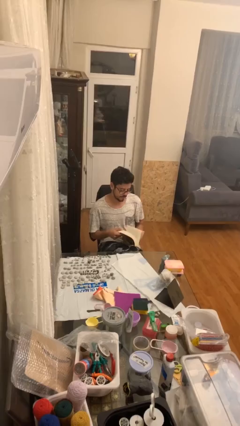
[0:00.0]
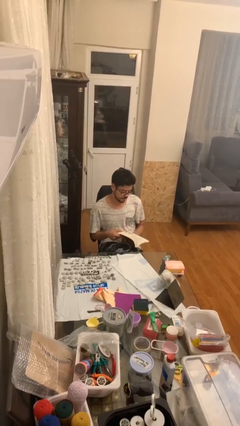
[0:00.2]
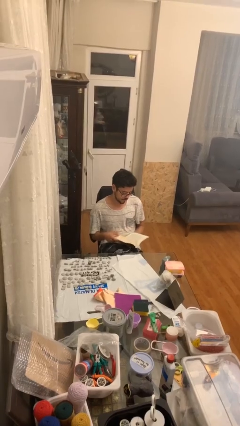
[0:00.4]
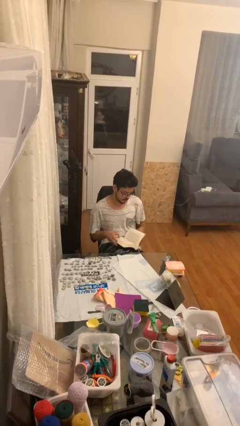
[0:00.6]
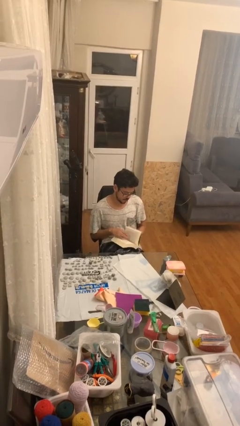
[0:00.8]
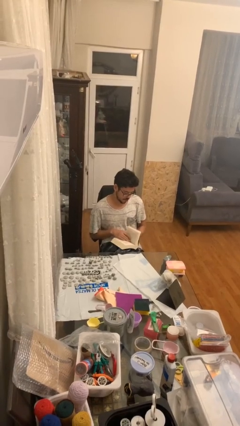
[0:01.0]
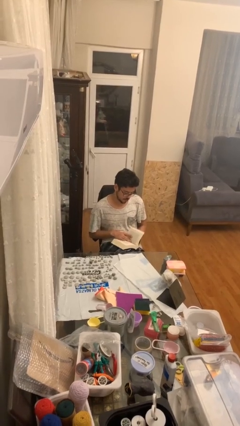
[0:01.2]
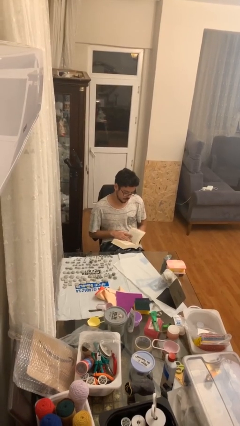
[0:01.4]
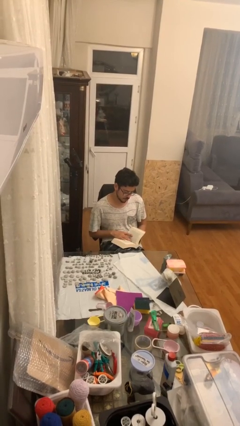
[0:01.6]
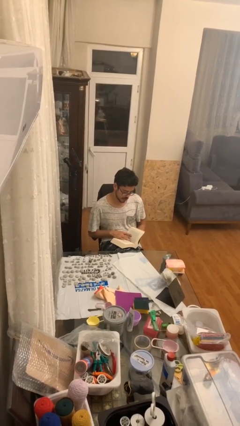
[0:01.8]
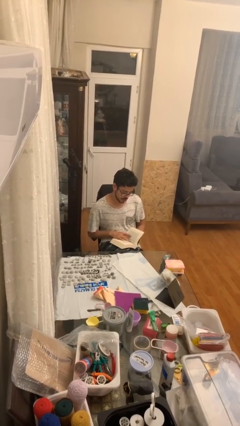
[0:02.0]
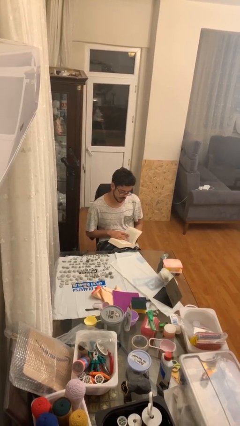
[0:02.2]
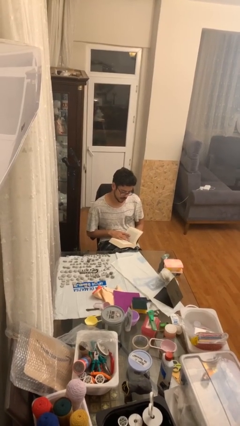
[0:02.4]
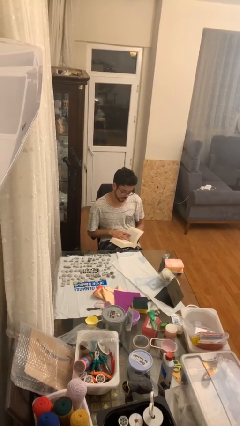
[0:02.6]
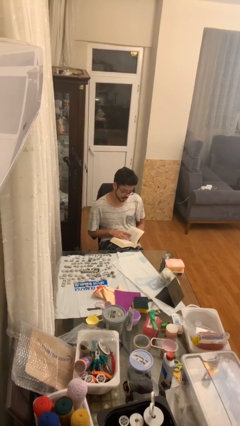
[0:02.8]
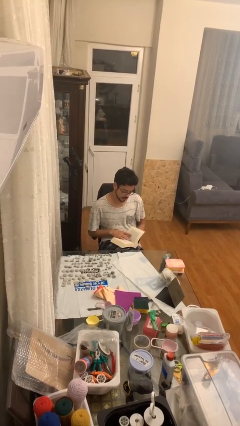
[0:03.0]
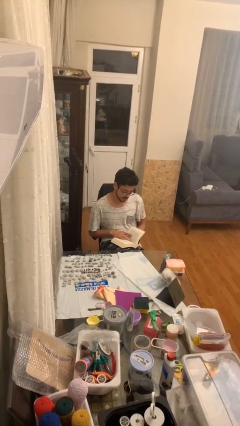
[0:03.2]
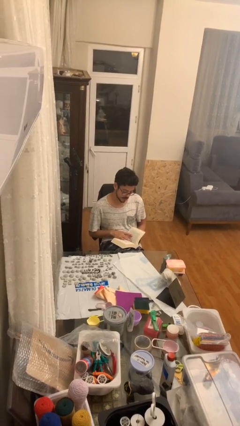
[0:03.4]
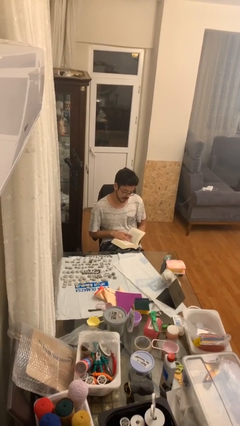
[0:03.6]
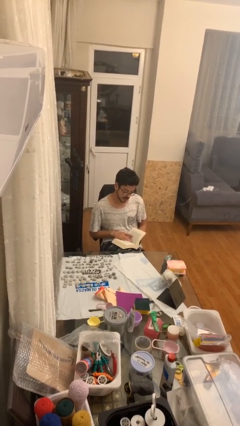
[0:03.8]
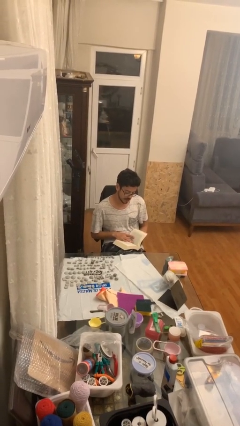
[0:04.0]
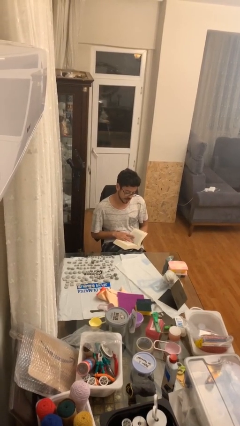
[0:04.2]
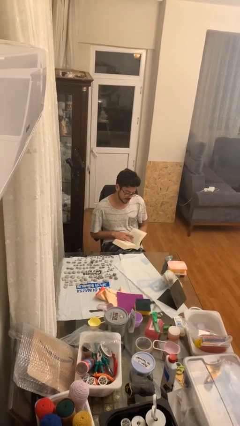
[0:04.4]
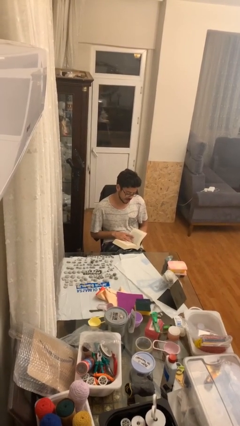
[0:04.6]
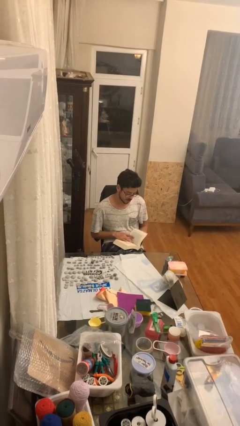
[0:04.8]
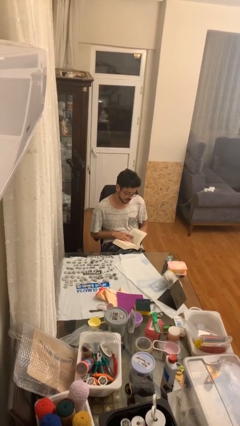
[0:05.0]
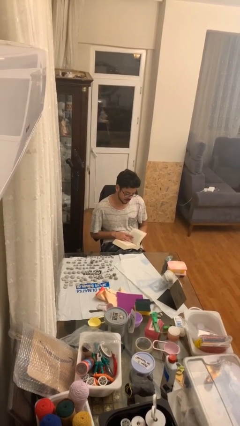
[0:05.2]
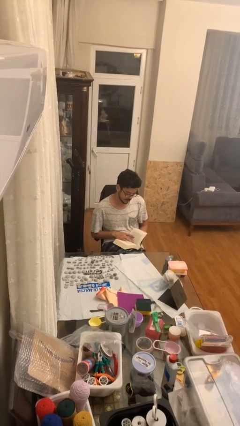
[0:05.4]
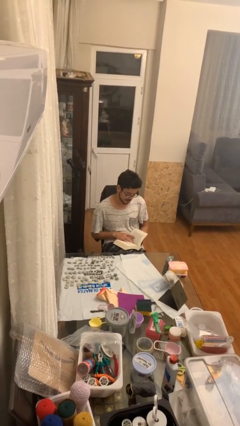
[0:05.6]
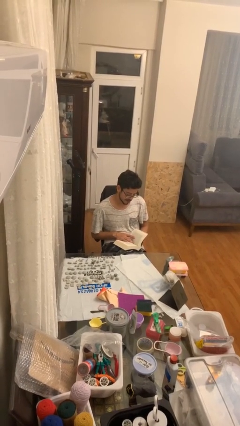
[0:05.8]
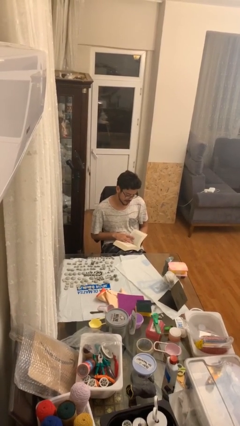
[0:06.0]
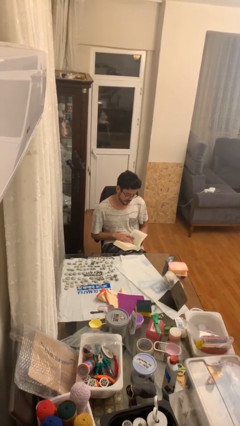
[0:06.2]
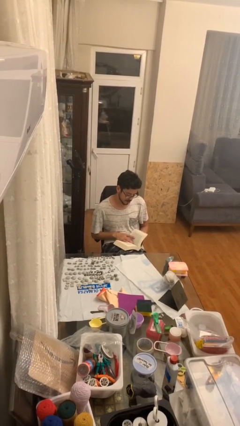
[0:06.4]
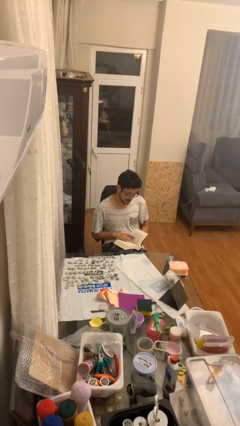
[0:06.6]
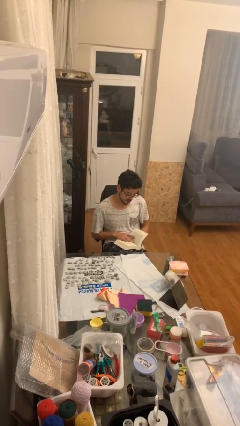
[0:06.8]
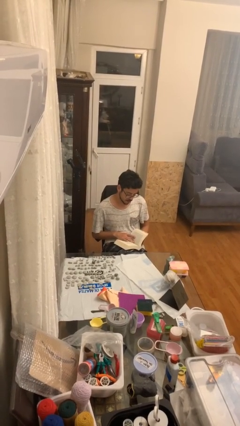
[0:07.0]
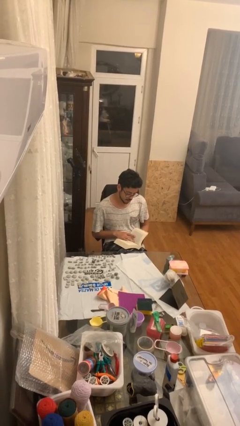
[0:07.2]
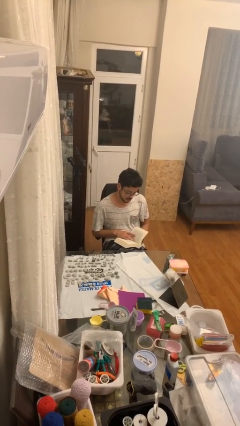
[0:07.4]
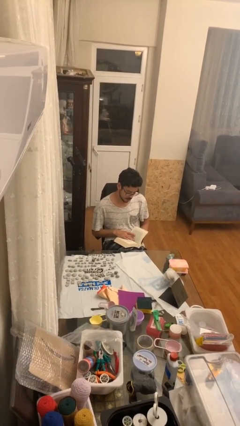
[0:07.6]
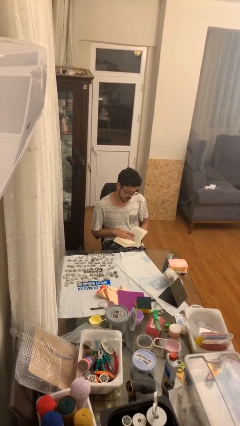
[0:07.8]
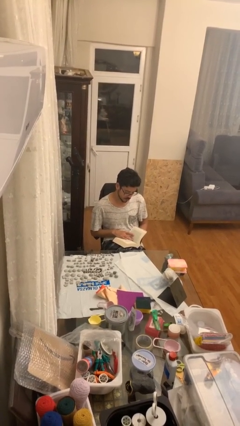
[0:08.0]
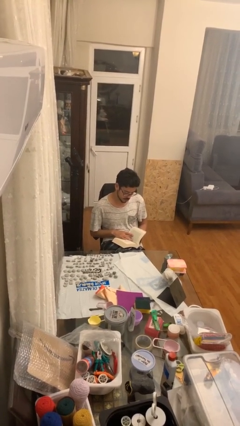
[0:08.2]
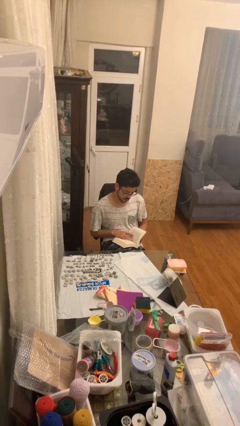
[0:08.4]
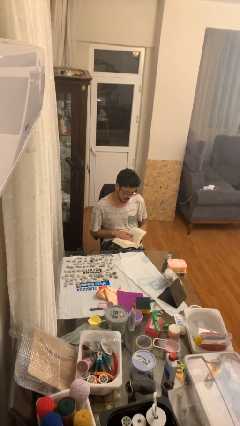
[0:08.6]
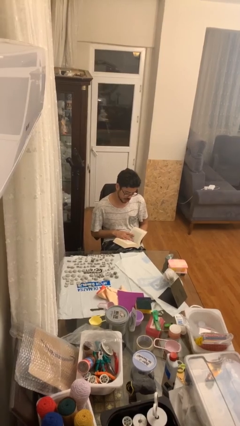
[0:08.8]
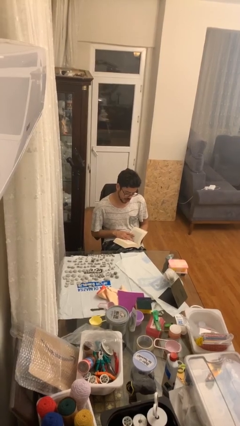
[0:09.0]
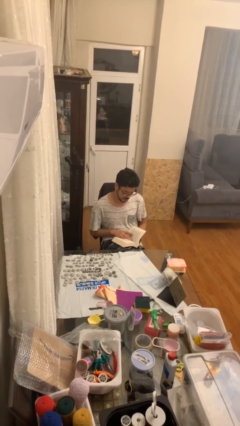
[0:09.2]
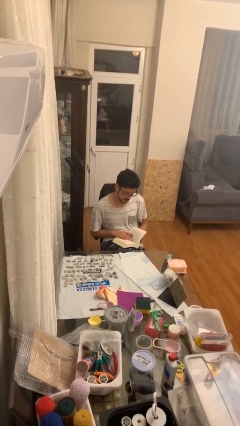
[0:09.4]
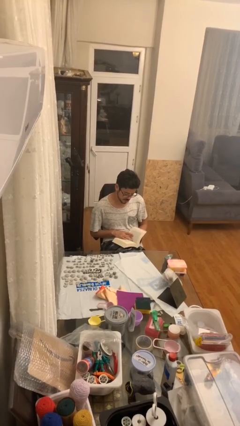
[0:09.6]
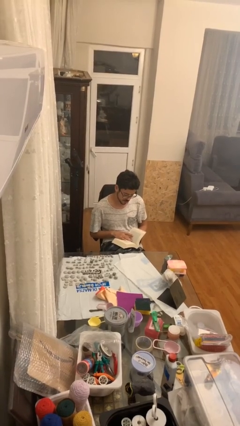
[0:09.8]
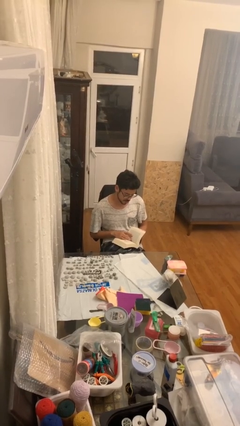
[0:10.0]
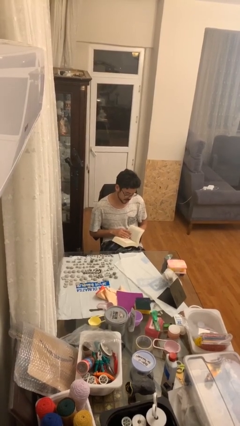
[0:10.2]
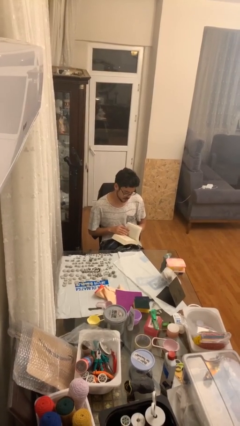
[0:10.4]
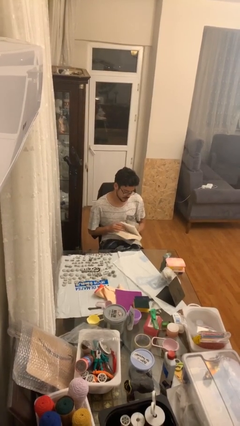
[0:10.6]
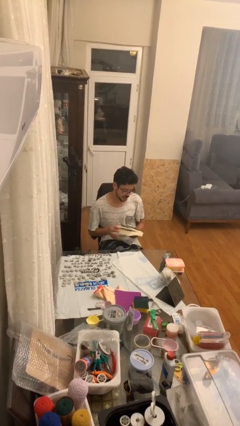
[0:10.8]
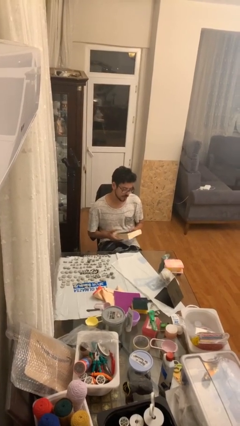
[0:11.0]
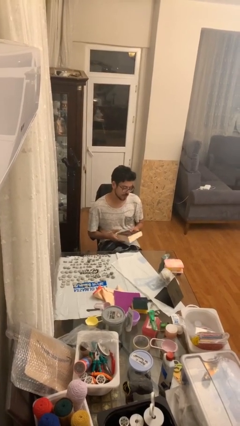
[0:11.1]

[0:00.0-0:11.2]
person reads document

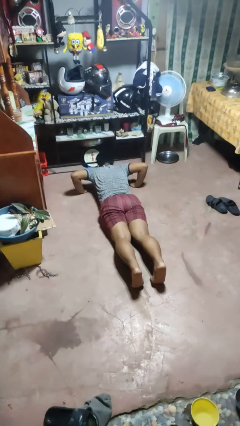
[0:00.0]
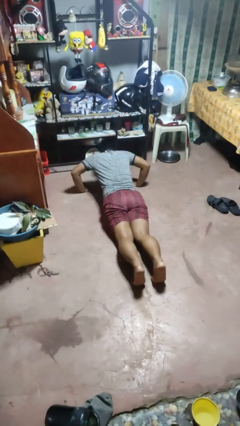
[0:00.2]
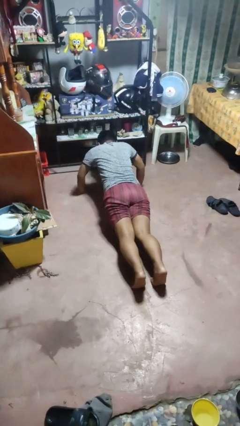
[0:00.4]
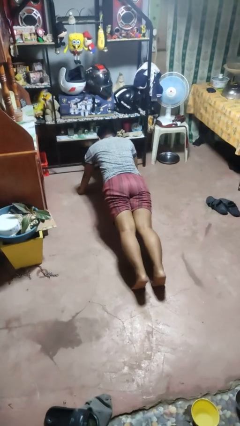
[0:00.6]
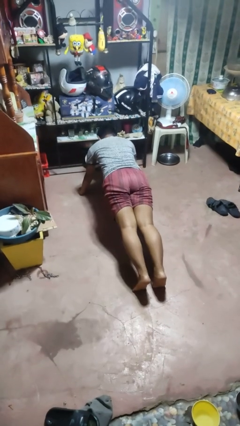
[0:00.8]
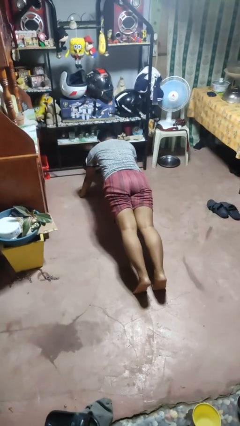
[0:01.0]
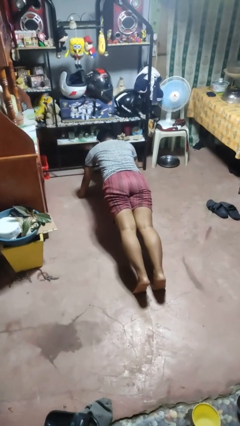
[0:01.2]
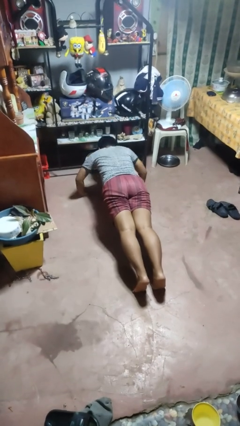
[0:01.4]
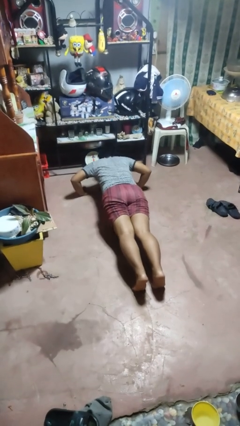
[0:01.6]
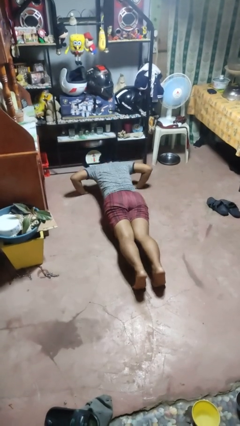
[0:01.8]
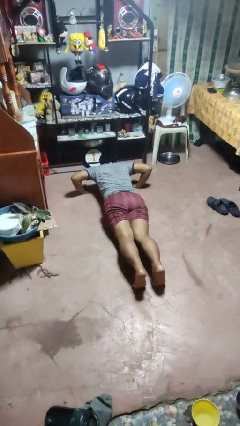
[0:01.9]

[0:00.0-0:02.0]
person exercises with pushup

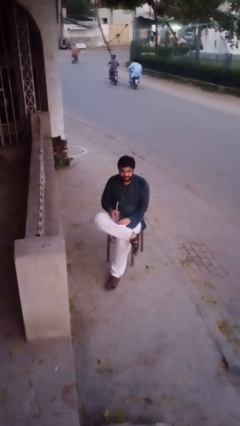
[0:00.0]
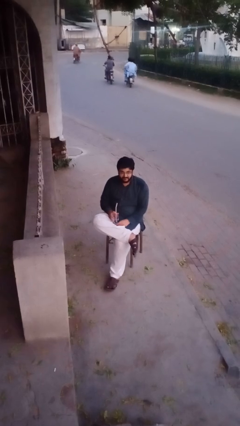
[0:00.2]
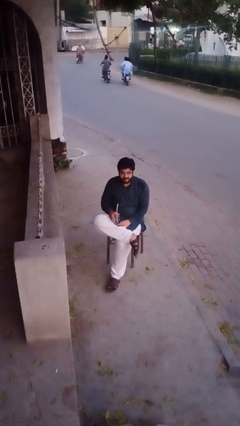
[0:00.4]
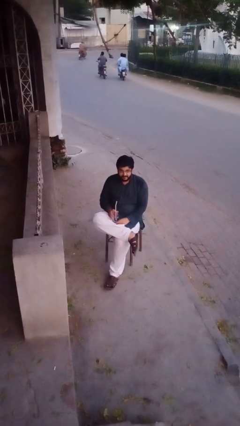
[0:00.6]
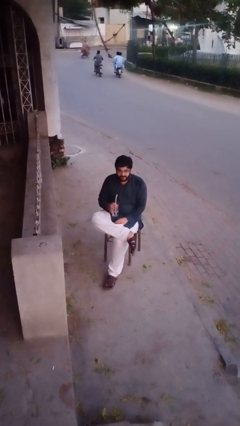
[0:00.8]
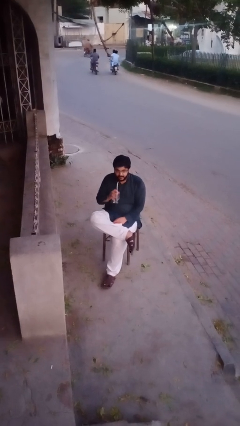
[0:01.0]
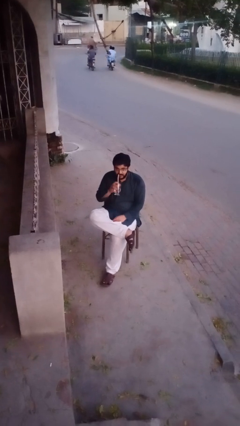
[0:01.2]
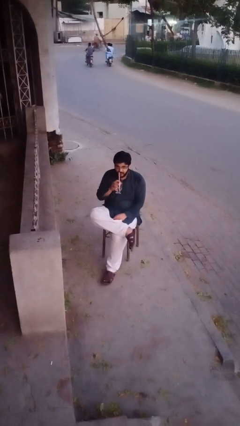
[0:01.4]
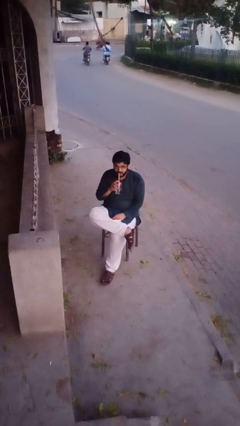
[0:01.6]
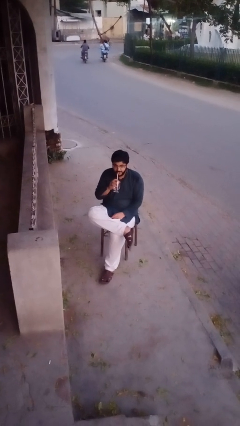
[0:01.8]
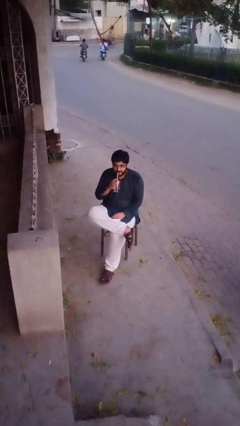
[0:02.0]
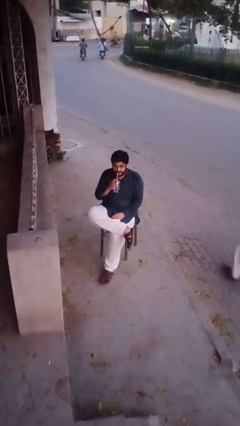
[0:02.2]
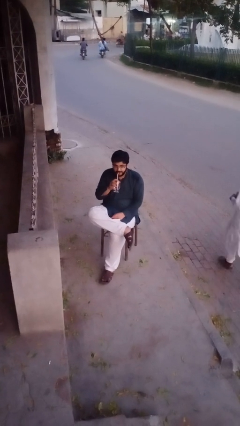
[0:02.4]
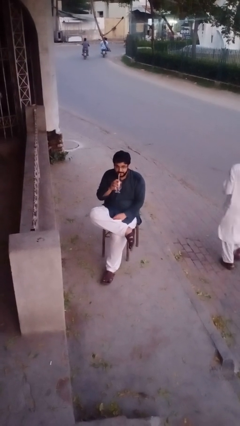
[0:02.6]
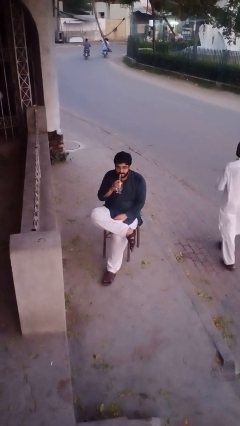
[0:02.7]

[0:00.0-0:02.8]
person drinks from straw

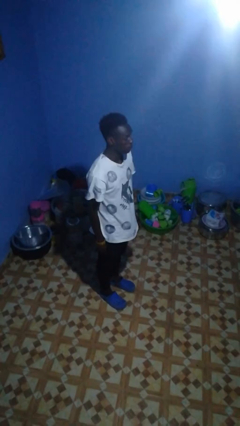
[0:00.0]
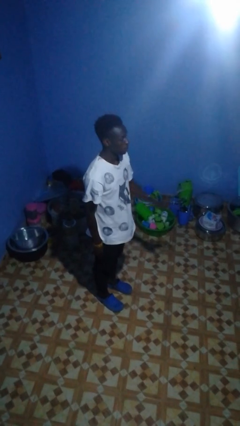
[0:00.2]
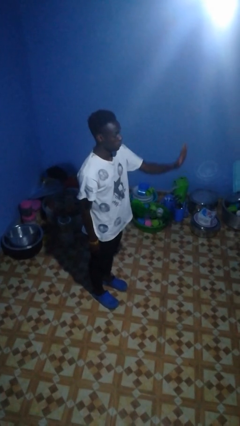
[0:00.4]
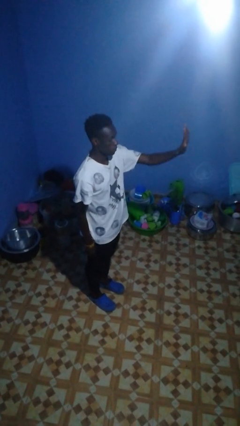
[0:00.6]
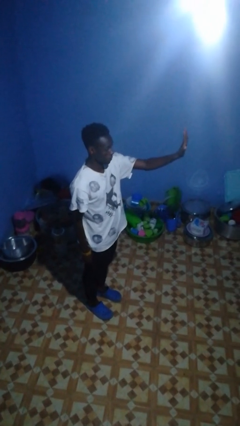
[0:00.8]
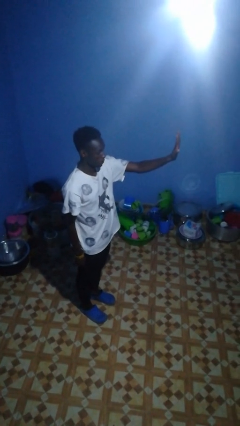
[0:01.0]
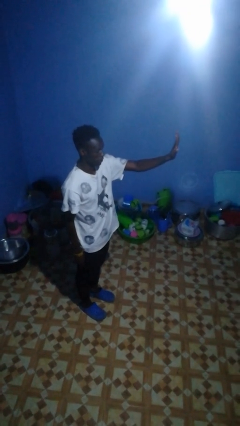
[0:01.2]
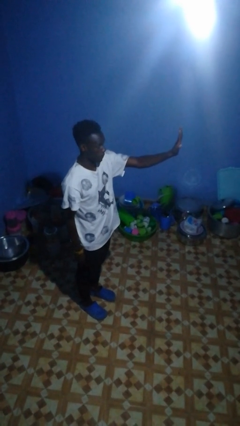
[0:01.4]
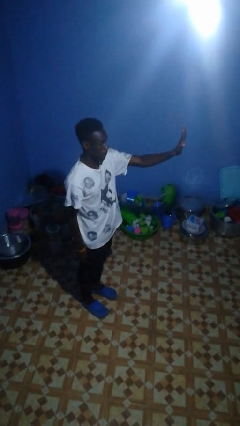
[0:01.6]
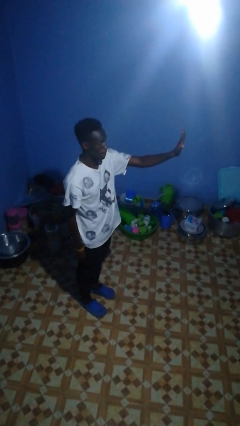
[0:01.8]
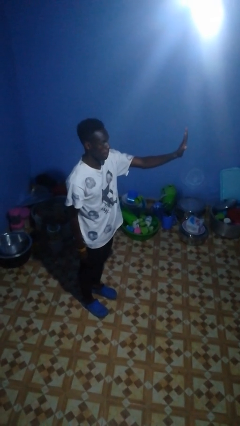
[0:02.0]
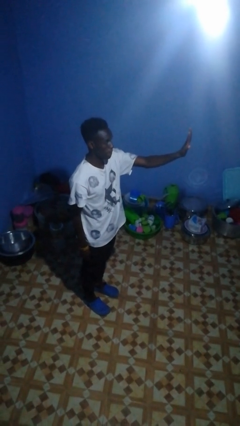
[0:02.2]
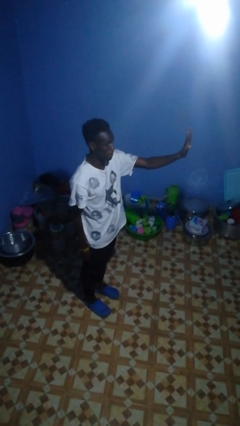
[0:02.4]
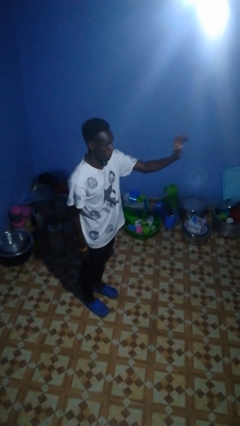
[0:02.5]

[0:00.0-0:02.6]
person gestures number five
